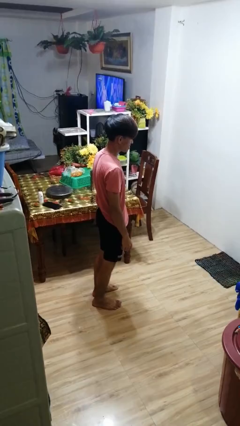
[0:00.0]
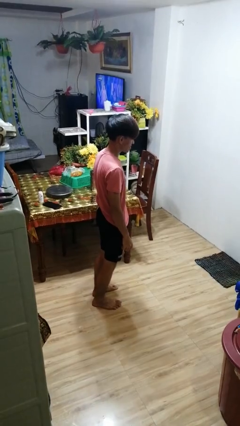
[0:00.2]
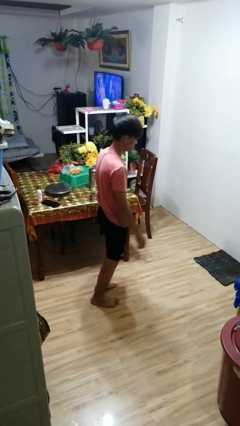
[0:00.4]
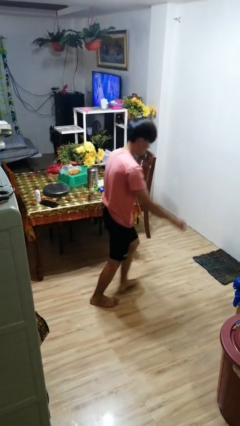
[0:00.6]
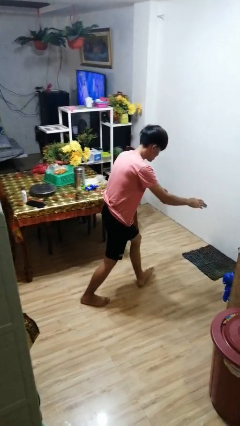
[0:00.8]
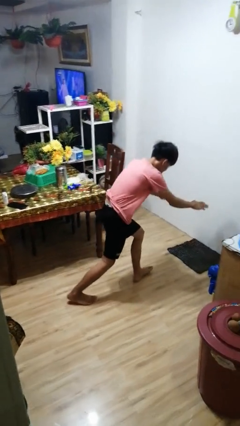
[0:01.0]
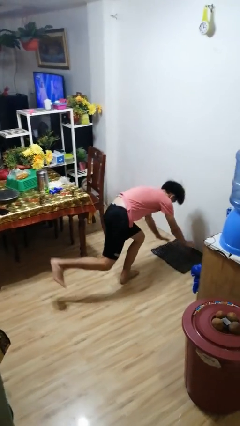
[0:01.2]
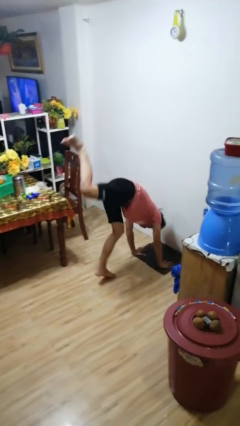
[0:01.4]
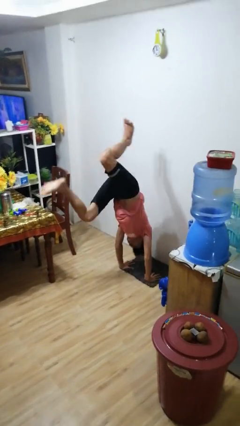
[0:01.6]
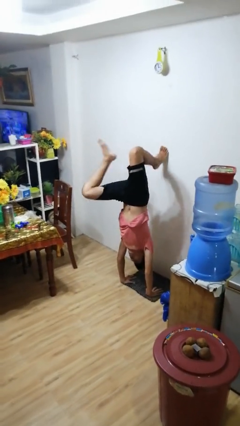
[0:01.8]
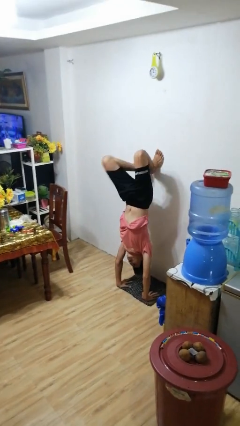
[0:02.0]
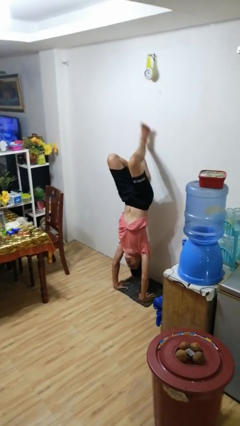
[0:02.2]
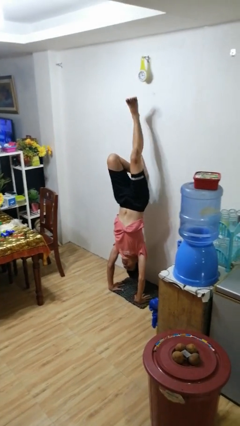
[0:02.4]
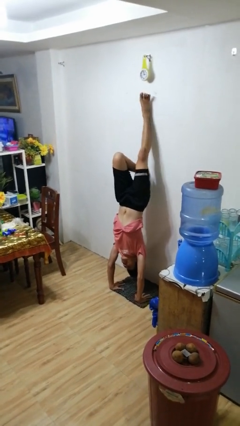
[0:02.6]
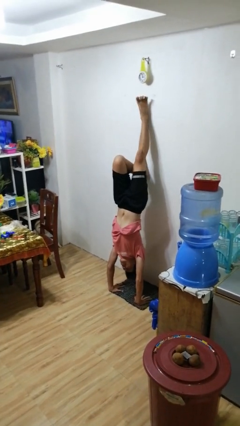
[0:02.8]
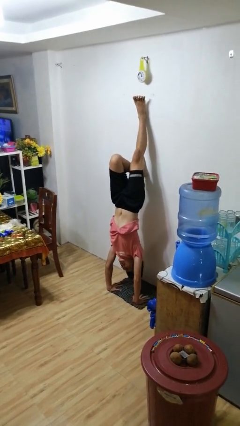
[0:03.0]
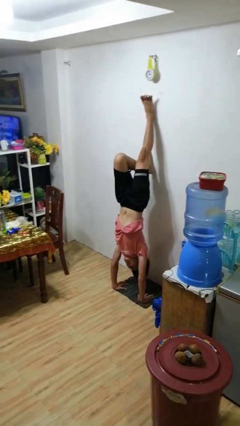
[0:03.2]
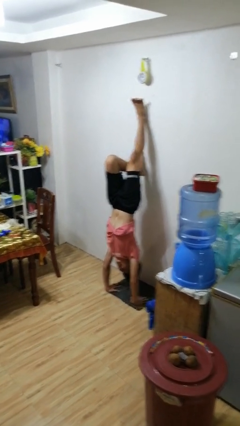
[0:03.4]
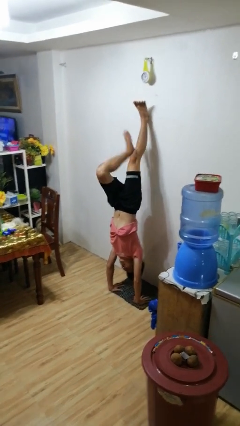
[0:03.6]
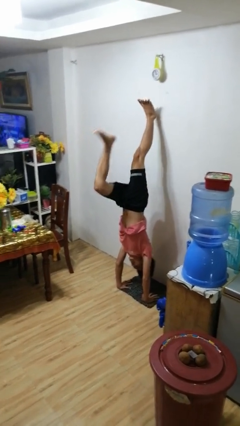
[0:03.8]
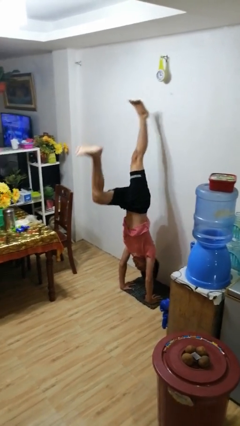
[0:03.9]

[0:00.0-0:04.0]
person handstand

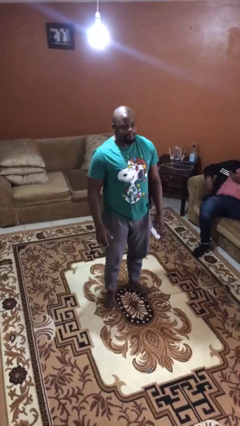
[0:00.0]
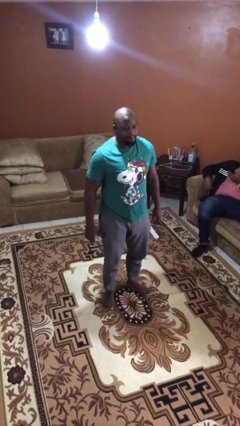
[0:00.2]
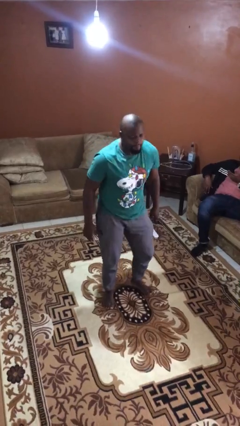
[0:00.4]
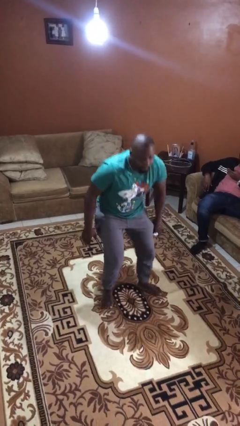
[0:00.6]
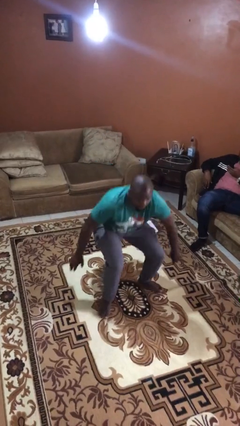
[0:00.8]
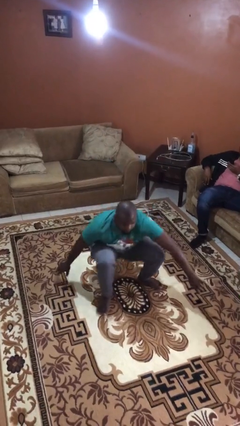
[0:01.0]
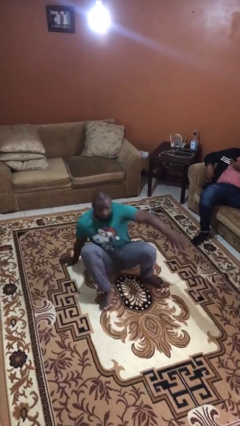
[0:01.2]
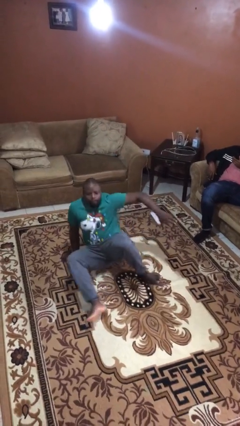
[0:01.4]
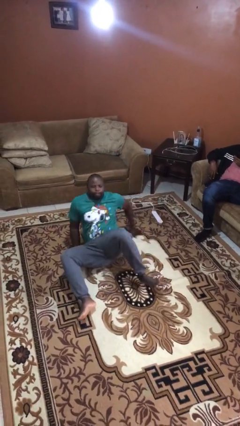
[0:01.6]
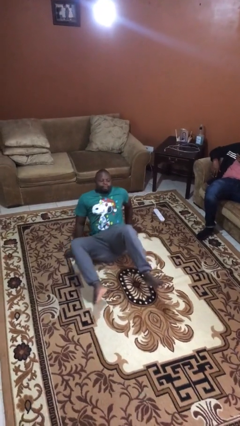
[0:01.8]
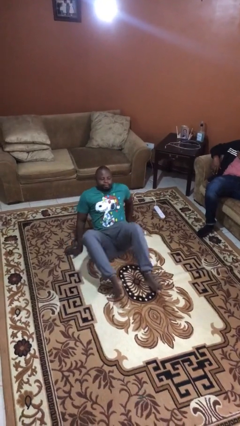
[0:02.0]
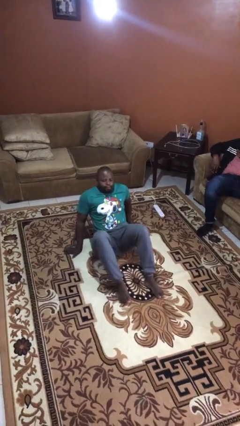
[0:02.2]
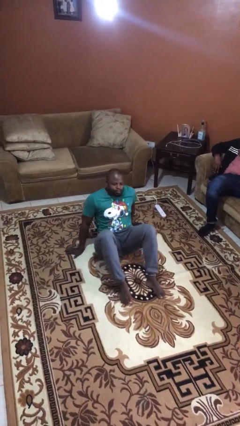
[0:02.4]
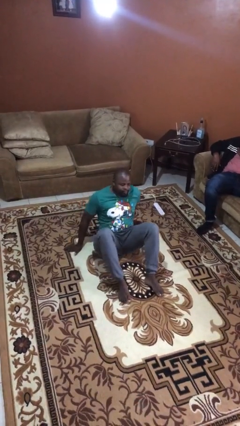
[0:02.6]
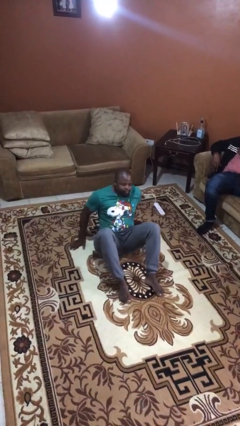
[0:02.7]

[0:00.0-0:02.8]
person sits down

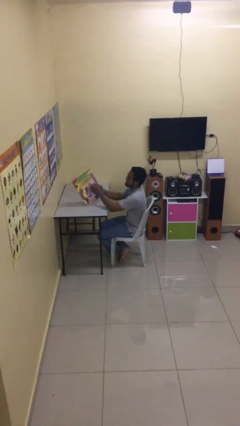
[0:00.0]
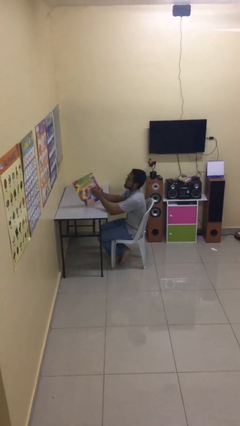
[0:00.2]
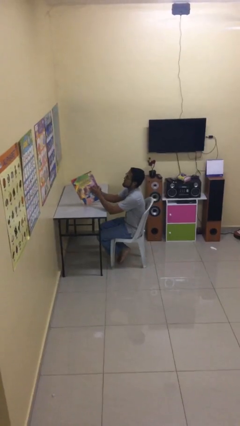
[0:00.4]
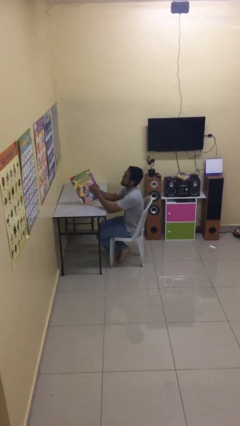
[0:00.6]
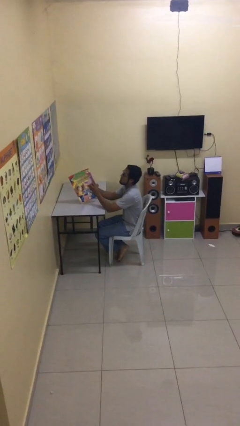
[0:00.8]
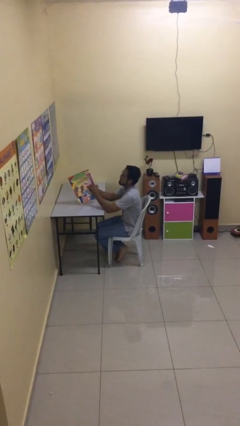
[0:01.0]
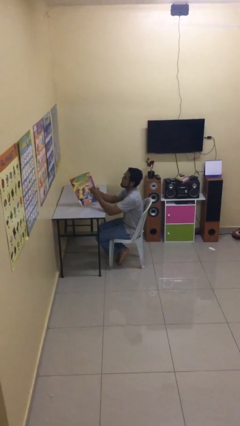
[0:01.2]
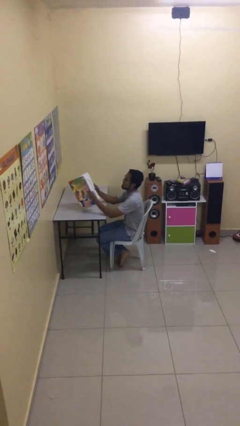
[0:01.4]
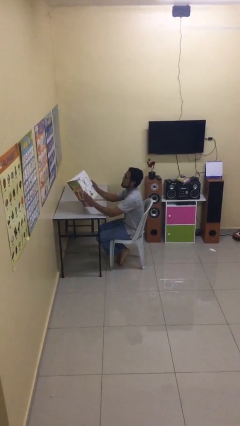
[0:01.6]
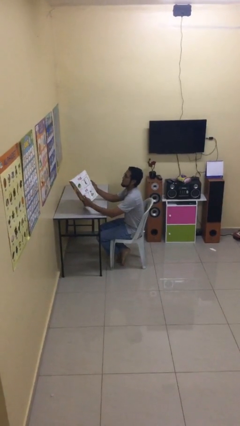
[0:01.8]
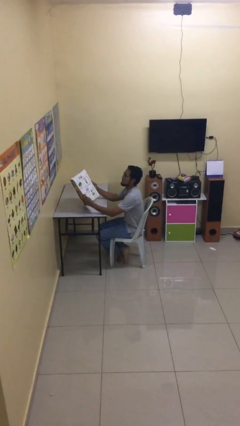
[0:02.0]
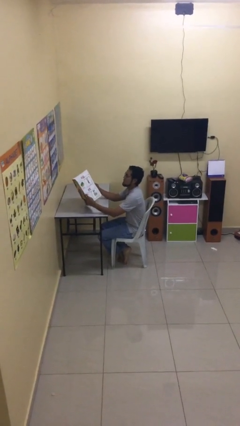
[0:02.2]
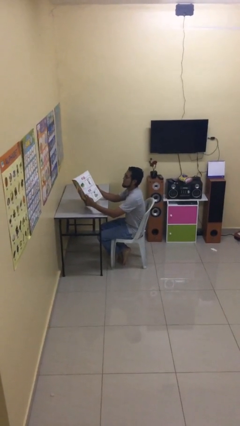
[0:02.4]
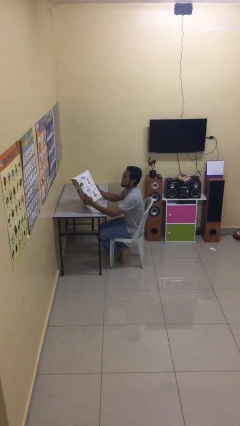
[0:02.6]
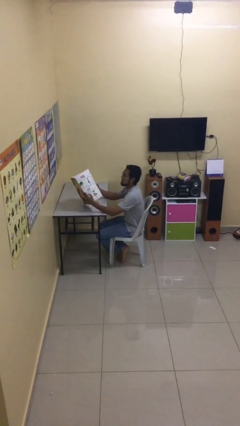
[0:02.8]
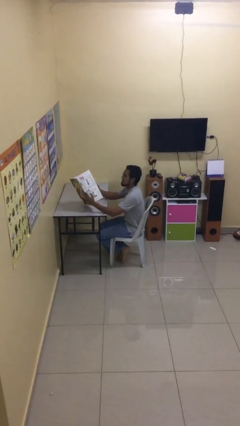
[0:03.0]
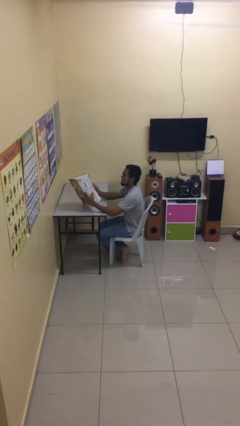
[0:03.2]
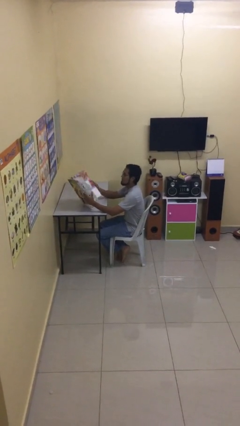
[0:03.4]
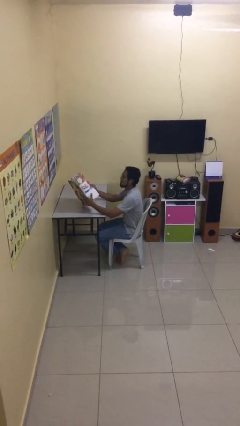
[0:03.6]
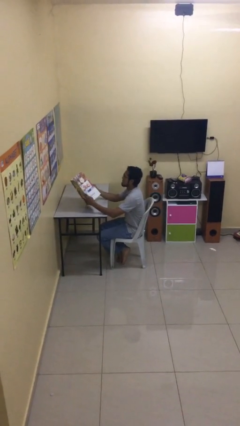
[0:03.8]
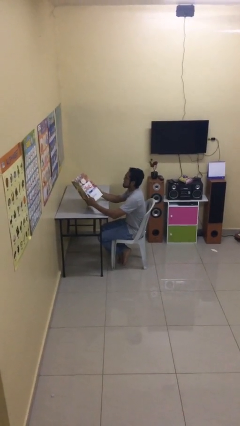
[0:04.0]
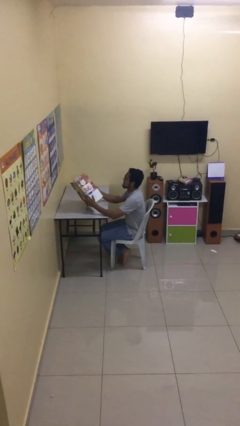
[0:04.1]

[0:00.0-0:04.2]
person reads document

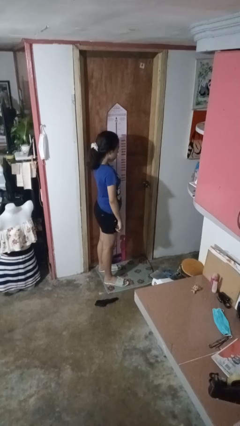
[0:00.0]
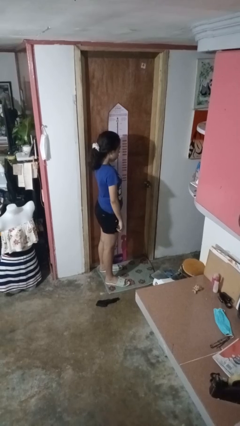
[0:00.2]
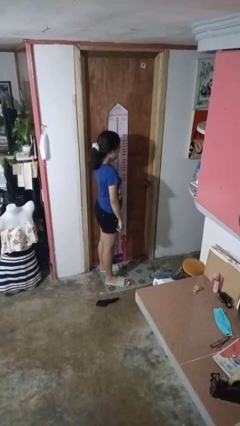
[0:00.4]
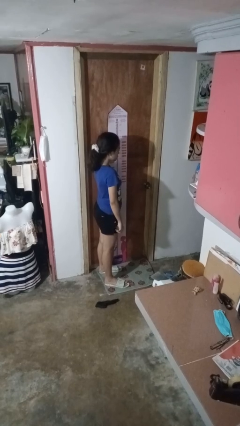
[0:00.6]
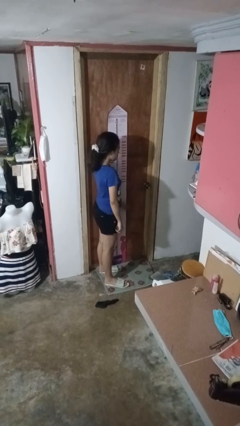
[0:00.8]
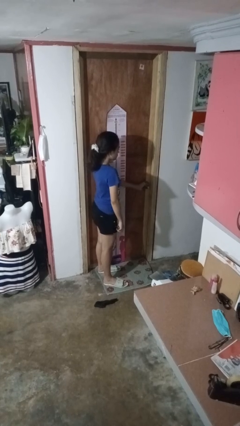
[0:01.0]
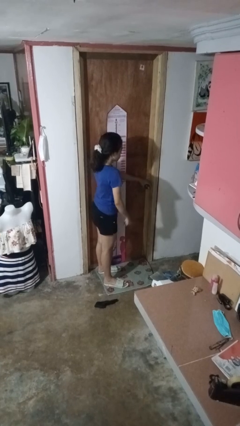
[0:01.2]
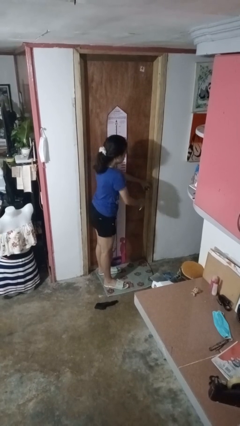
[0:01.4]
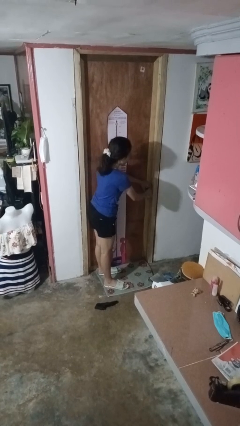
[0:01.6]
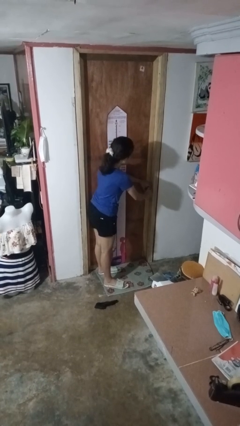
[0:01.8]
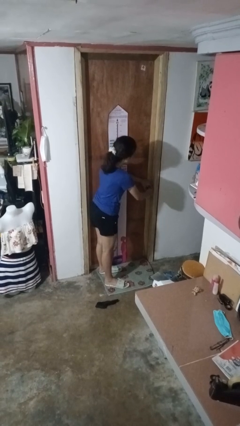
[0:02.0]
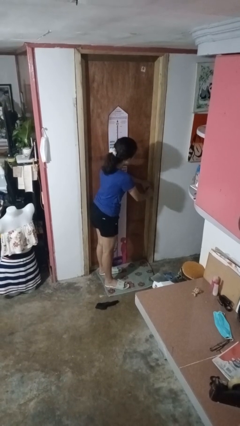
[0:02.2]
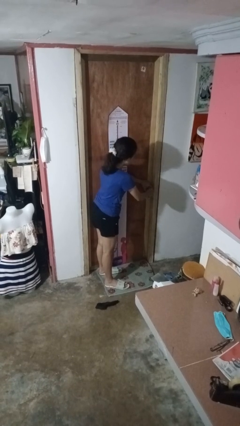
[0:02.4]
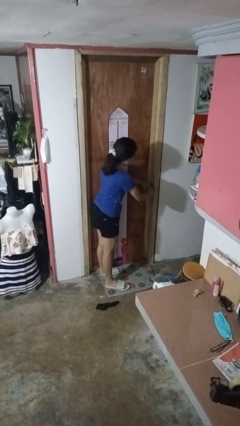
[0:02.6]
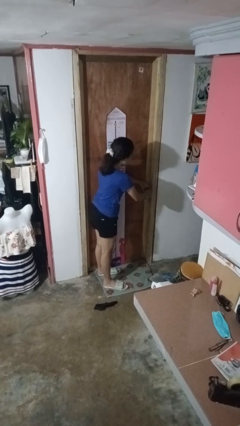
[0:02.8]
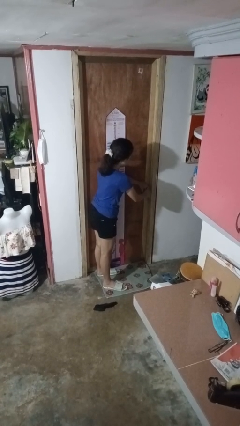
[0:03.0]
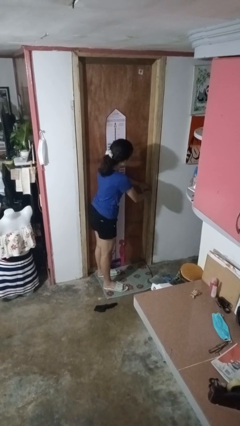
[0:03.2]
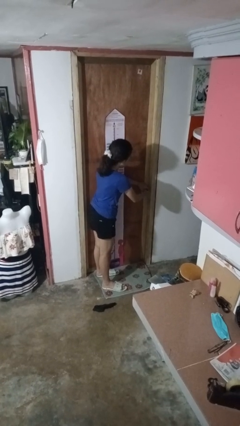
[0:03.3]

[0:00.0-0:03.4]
person unlocks door with keys

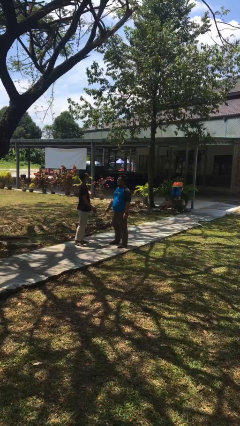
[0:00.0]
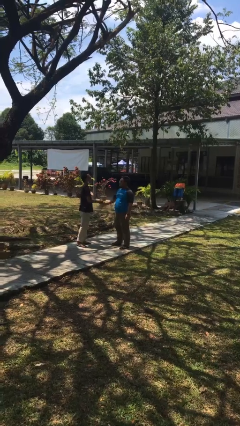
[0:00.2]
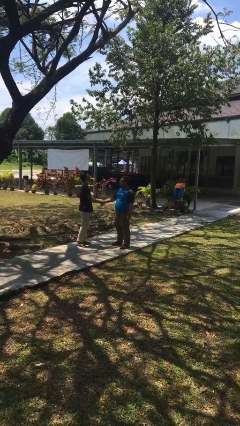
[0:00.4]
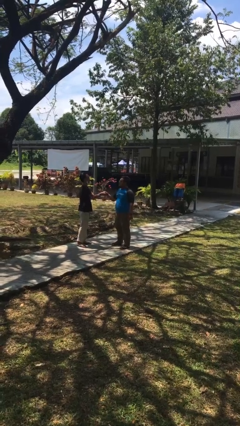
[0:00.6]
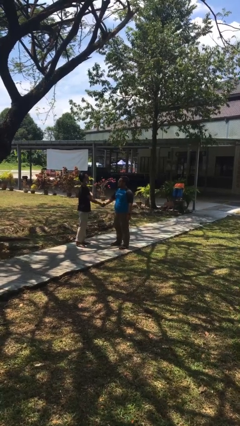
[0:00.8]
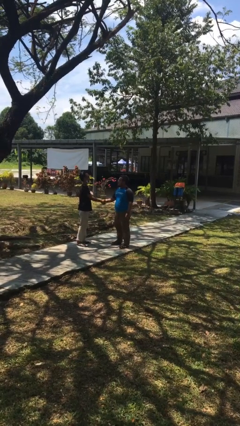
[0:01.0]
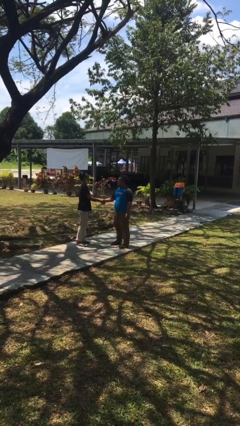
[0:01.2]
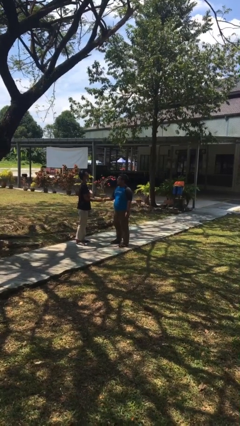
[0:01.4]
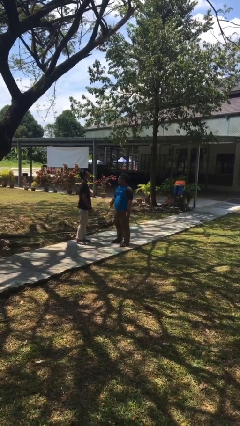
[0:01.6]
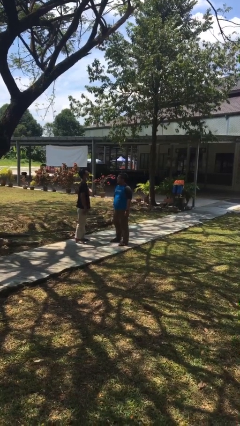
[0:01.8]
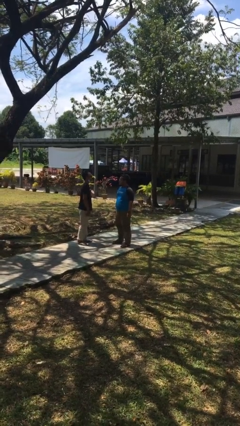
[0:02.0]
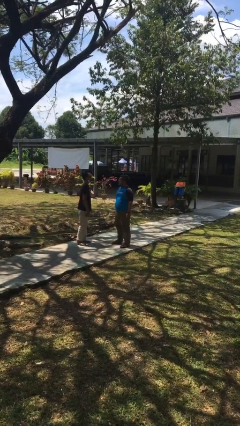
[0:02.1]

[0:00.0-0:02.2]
person shakes hand

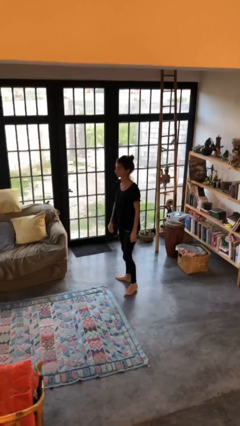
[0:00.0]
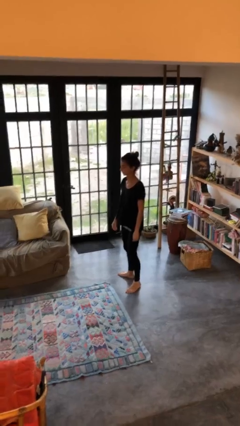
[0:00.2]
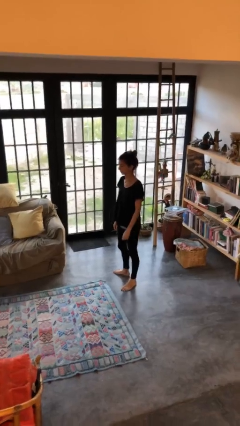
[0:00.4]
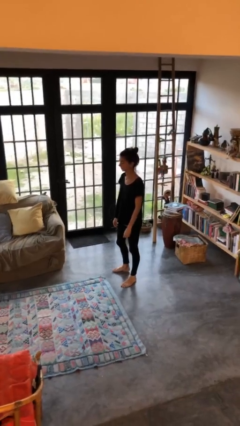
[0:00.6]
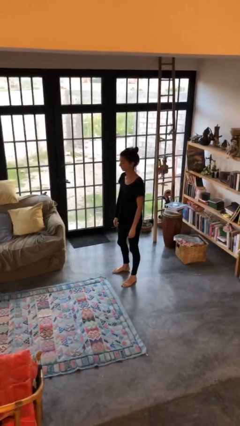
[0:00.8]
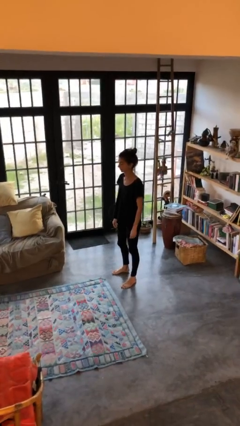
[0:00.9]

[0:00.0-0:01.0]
person stands up
